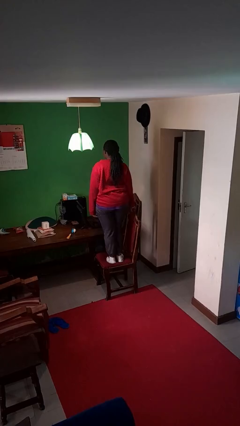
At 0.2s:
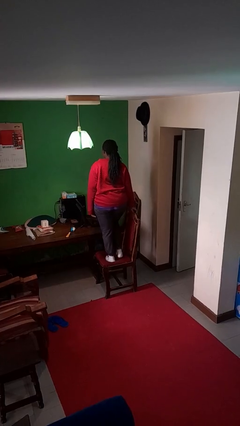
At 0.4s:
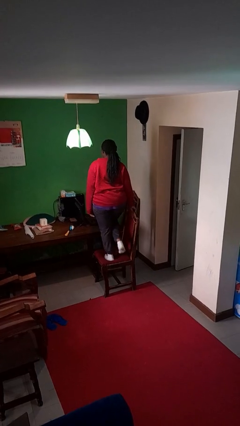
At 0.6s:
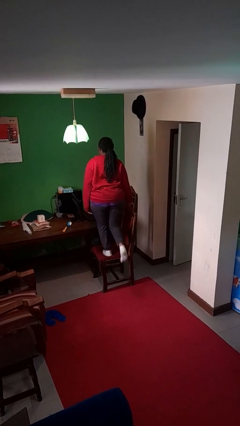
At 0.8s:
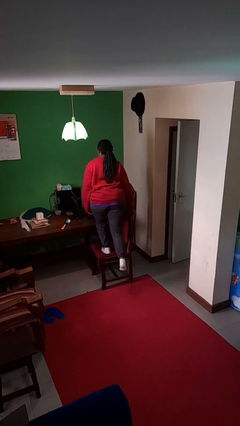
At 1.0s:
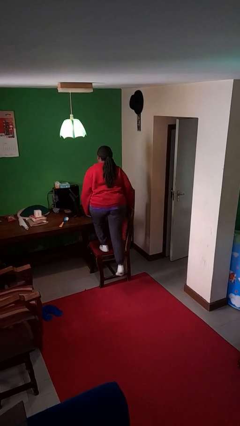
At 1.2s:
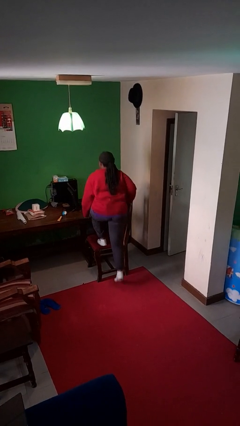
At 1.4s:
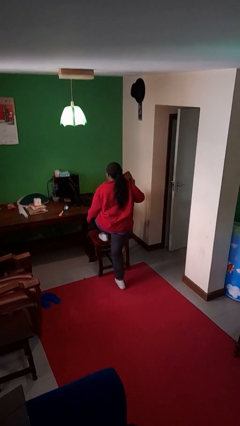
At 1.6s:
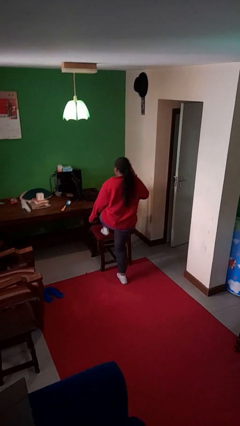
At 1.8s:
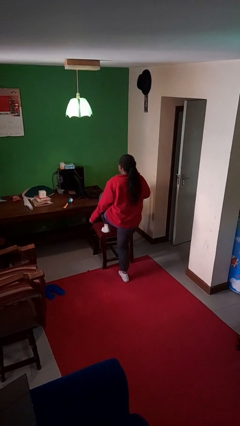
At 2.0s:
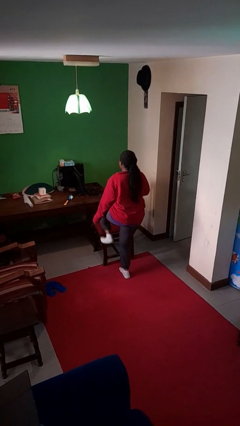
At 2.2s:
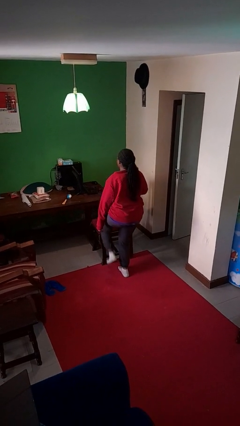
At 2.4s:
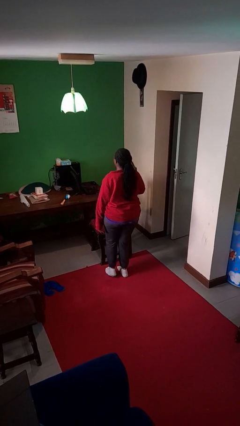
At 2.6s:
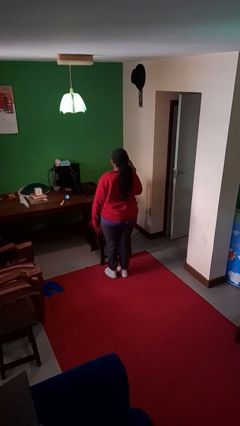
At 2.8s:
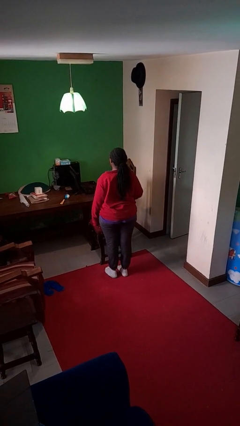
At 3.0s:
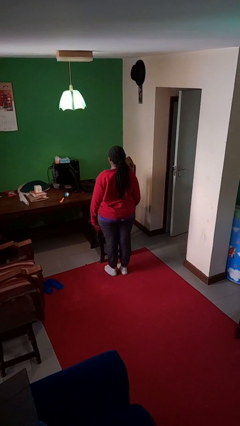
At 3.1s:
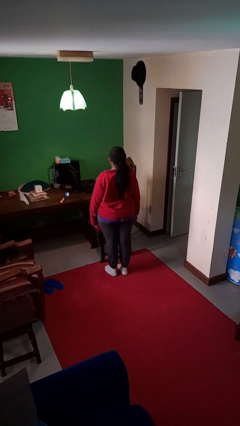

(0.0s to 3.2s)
person climbs off chair

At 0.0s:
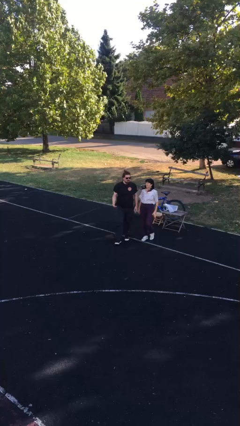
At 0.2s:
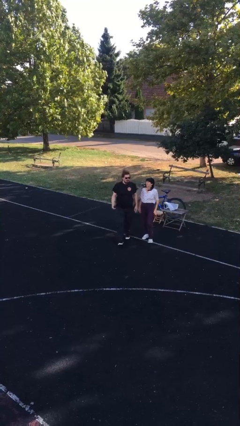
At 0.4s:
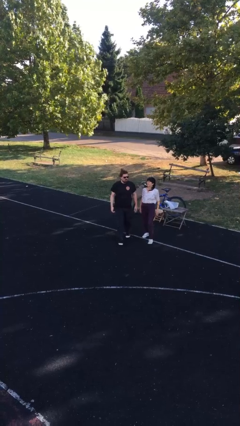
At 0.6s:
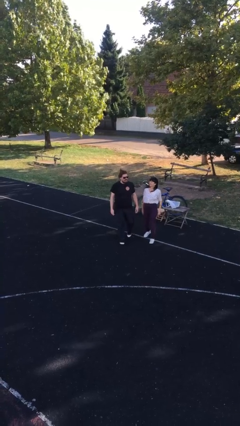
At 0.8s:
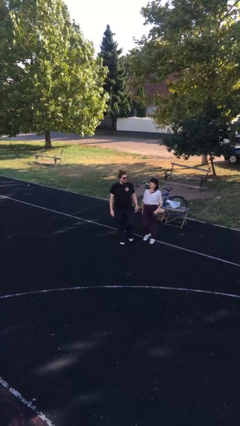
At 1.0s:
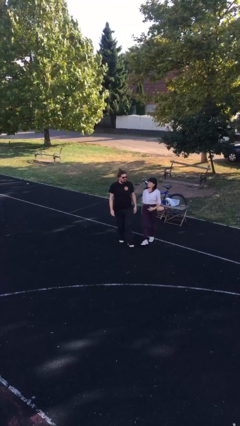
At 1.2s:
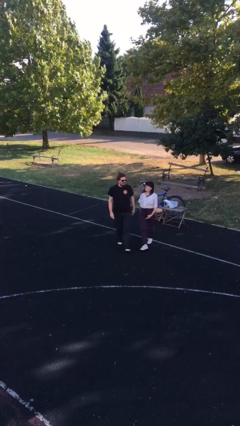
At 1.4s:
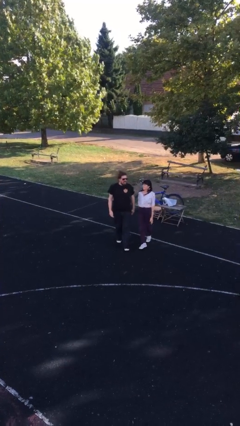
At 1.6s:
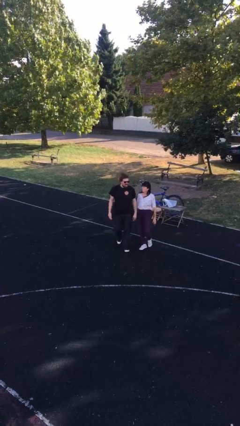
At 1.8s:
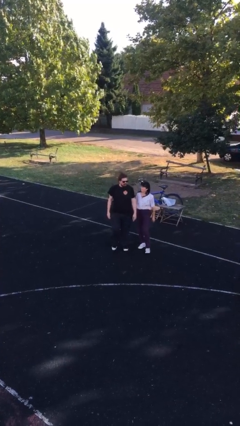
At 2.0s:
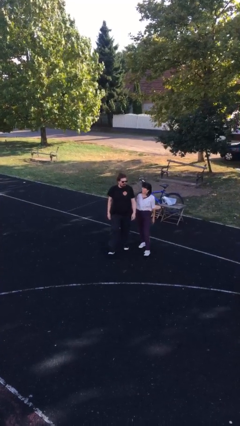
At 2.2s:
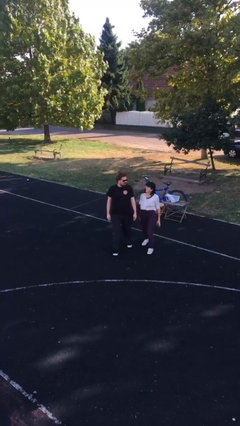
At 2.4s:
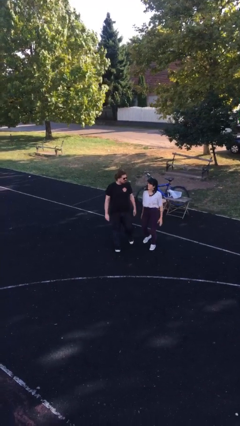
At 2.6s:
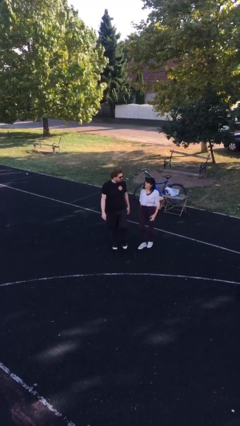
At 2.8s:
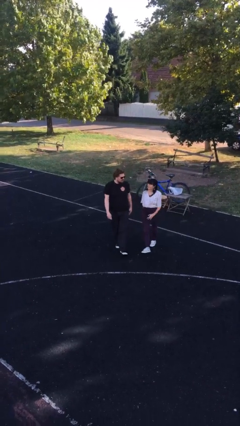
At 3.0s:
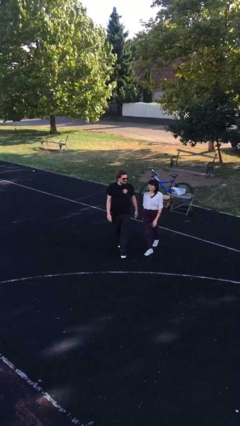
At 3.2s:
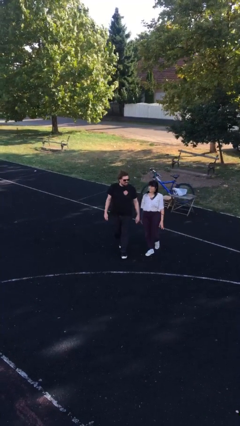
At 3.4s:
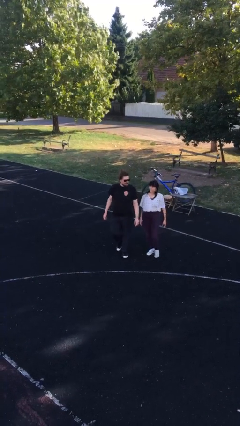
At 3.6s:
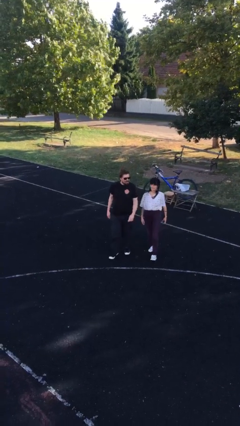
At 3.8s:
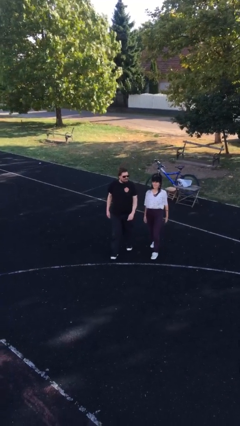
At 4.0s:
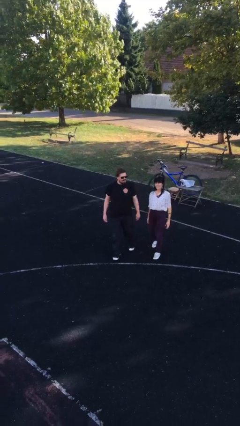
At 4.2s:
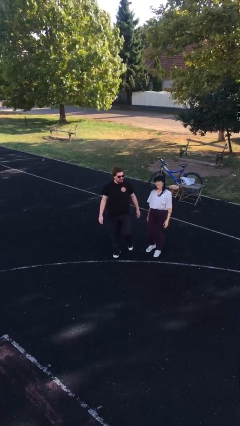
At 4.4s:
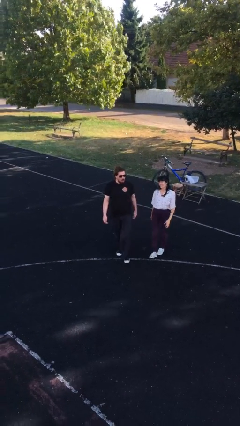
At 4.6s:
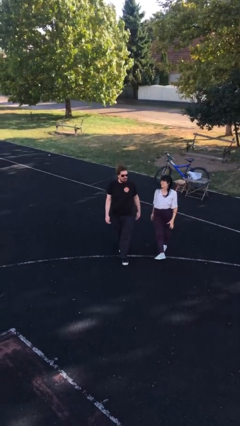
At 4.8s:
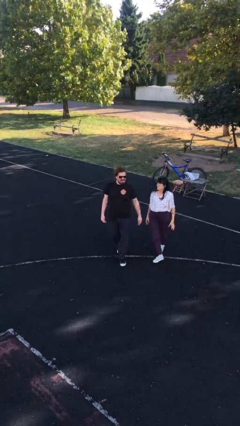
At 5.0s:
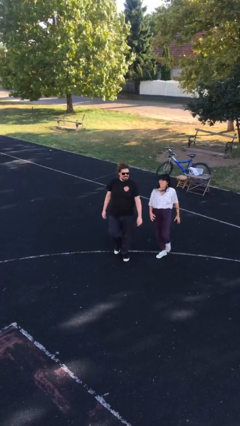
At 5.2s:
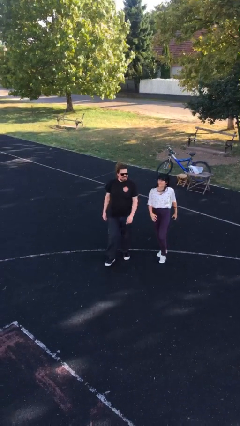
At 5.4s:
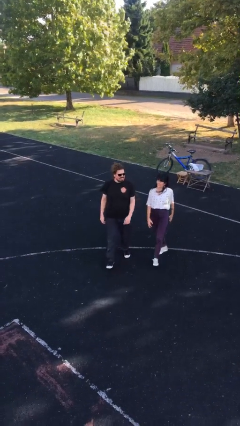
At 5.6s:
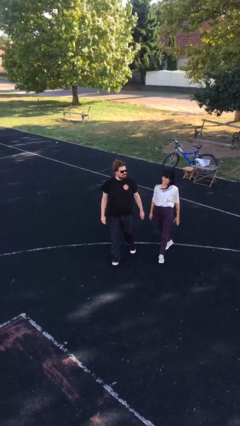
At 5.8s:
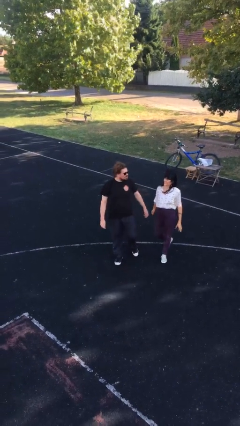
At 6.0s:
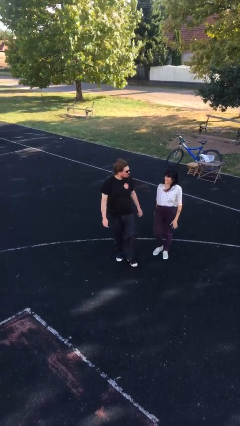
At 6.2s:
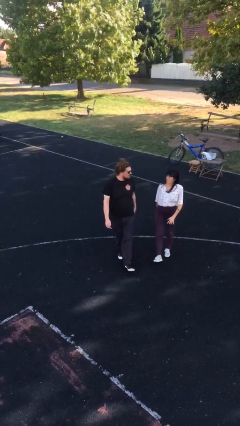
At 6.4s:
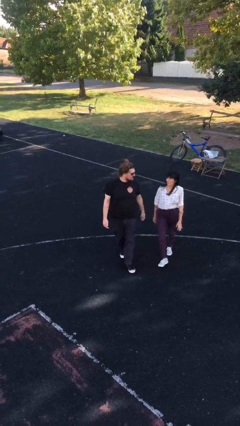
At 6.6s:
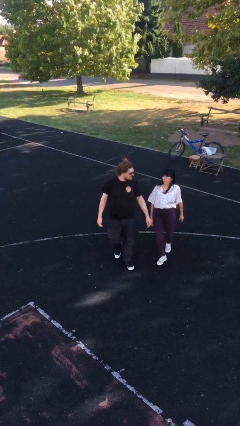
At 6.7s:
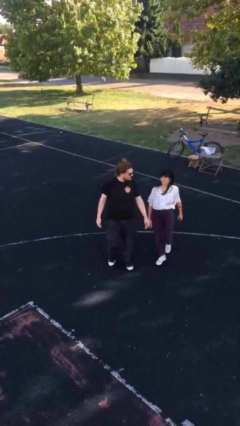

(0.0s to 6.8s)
person talks to person

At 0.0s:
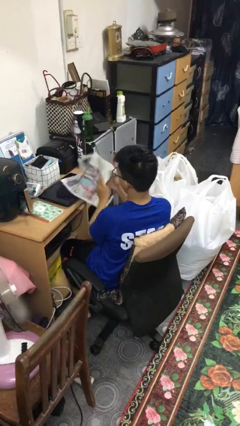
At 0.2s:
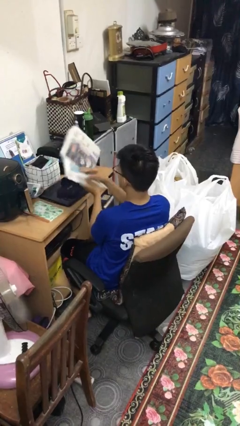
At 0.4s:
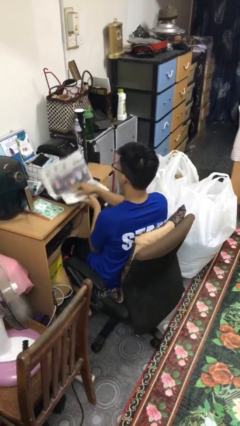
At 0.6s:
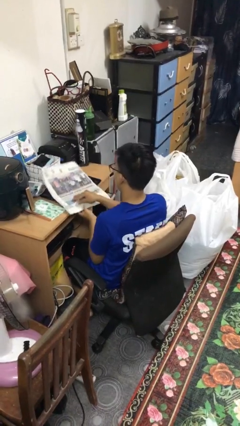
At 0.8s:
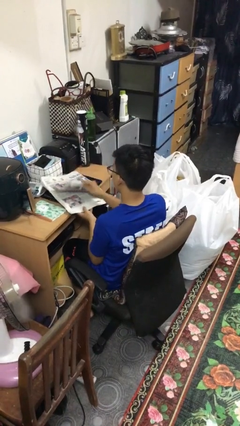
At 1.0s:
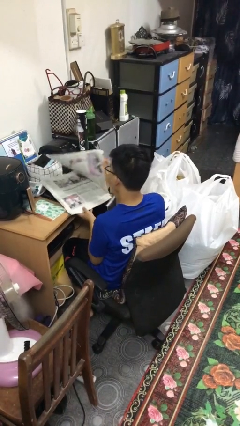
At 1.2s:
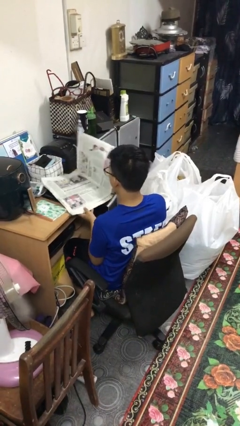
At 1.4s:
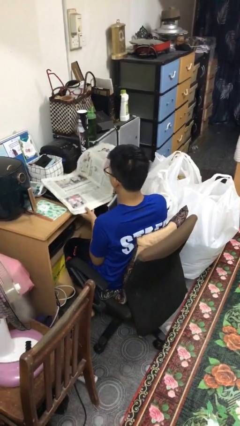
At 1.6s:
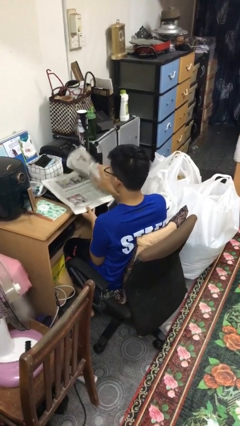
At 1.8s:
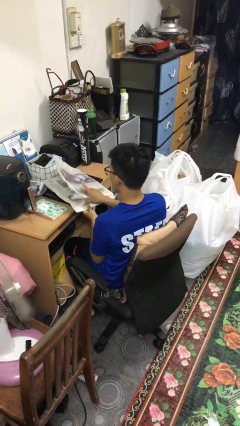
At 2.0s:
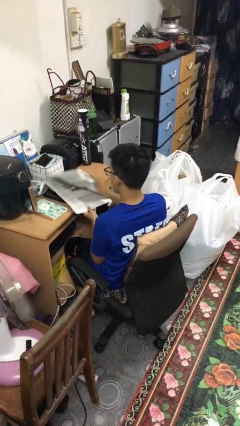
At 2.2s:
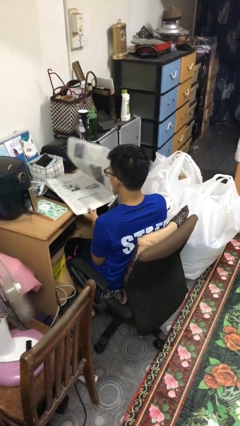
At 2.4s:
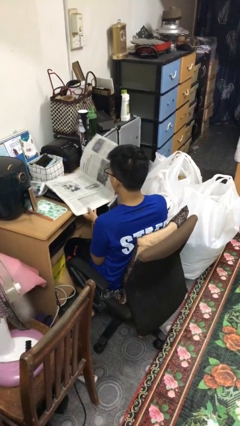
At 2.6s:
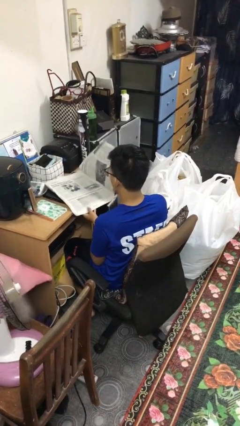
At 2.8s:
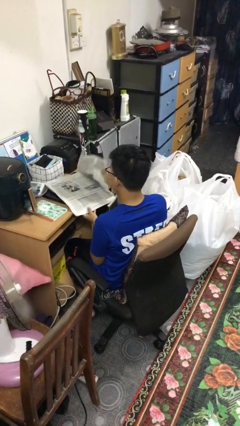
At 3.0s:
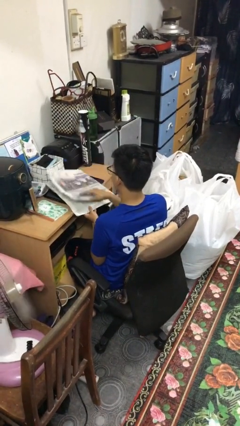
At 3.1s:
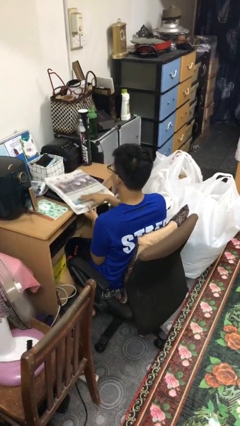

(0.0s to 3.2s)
person reads newspaper

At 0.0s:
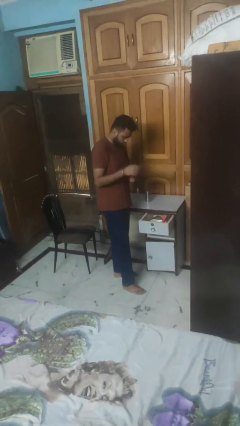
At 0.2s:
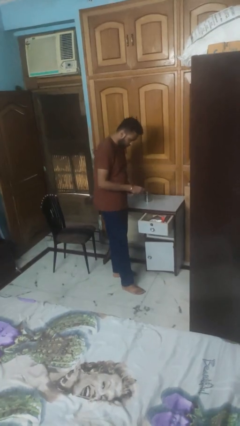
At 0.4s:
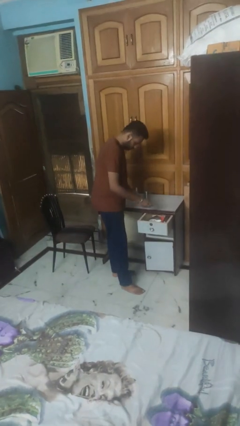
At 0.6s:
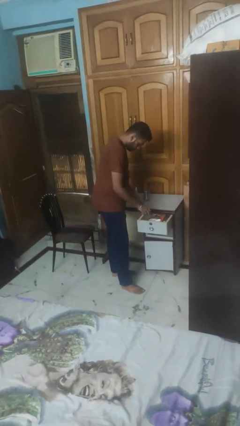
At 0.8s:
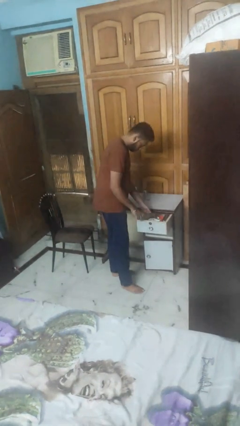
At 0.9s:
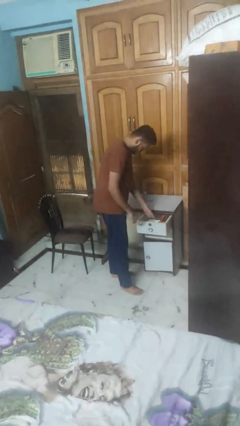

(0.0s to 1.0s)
person puts object into kitchen drawer

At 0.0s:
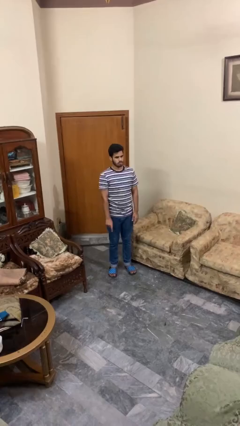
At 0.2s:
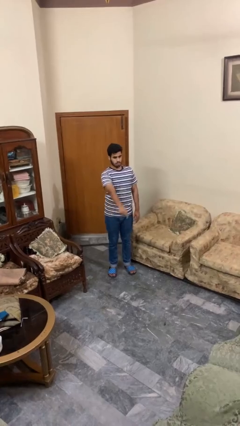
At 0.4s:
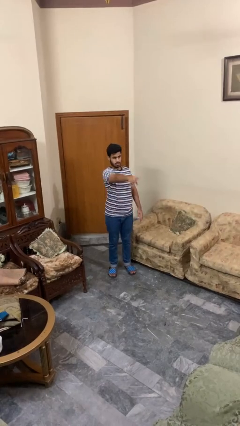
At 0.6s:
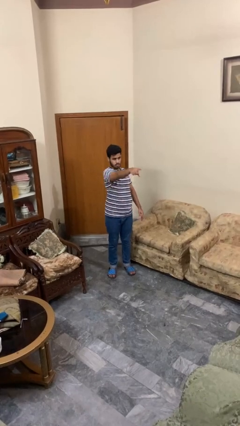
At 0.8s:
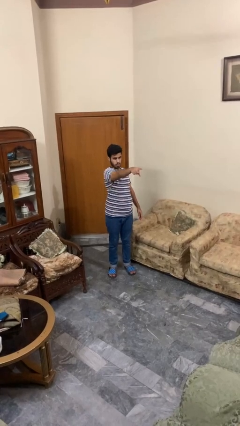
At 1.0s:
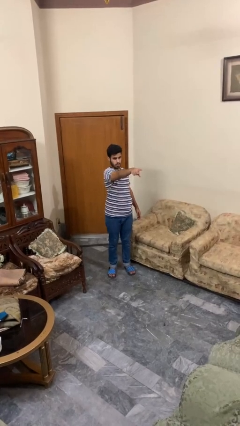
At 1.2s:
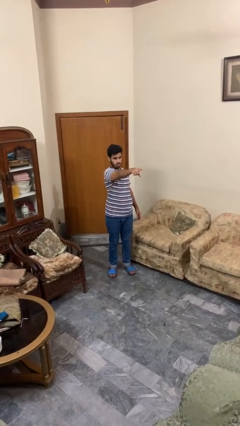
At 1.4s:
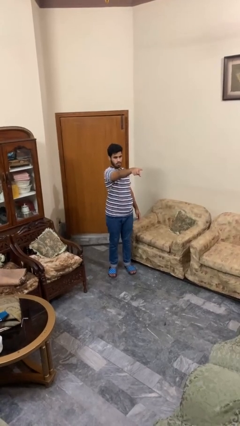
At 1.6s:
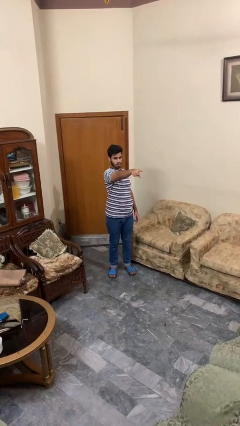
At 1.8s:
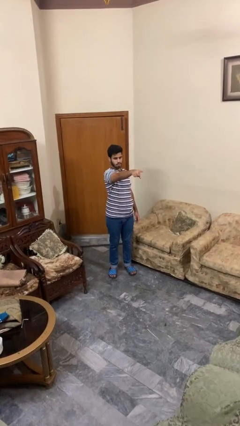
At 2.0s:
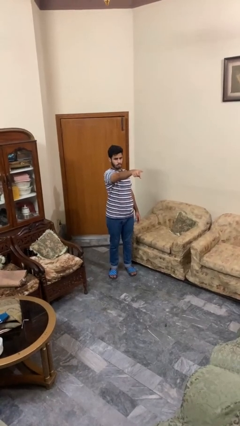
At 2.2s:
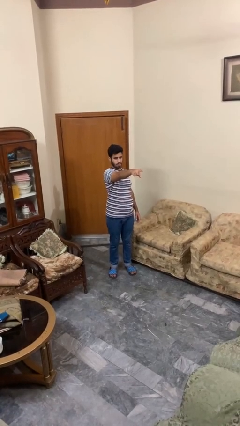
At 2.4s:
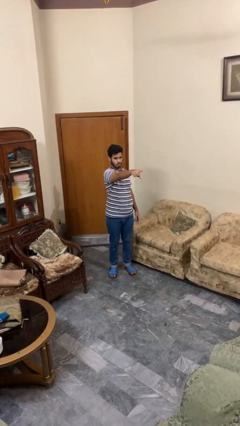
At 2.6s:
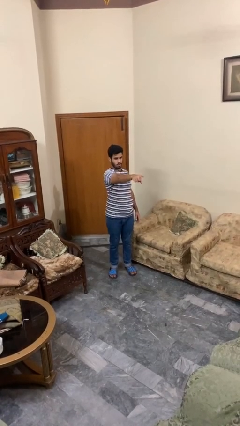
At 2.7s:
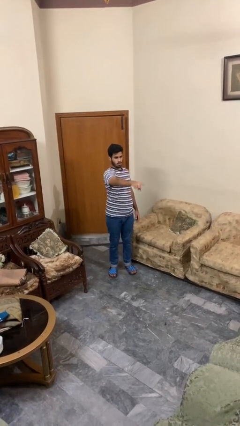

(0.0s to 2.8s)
person points at person

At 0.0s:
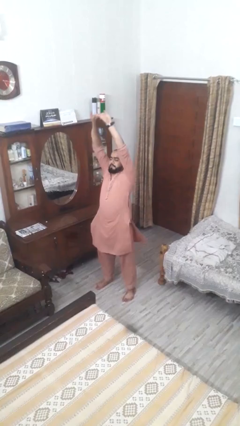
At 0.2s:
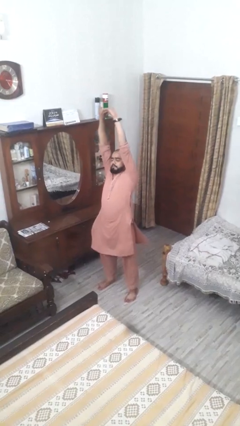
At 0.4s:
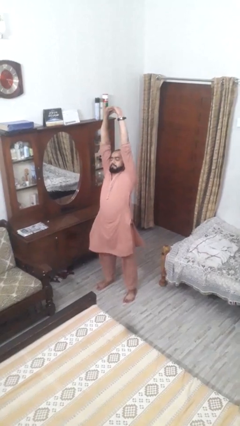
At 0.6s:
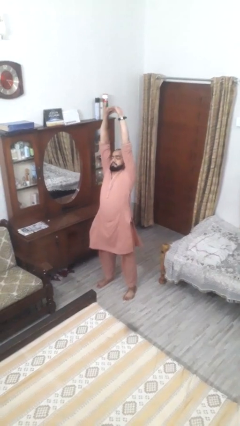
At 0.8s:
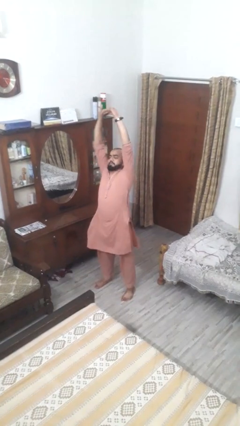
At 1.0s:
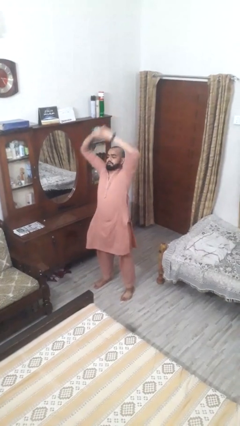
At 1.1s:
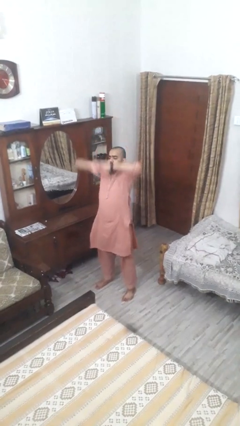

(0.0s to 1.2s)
person stretches arms over head
